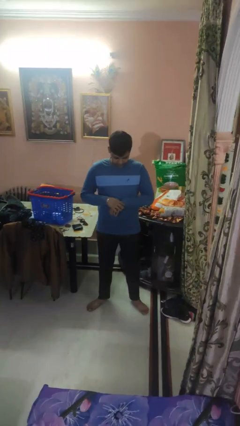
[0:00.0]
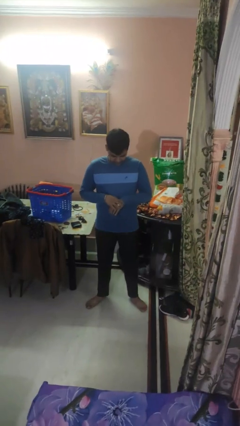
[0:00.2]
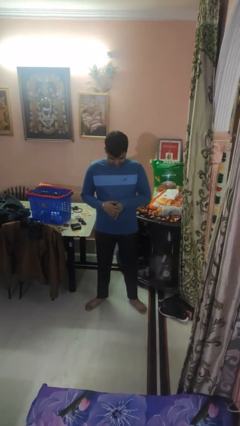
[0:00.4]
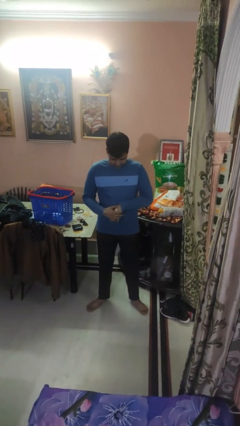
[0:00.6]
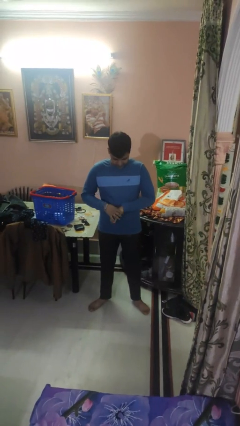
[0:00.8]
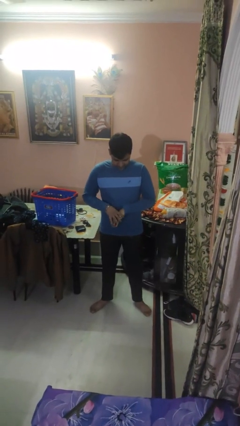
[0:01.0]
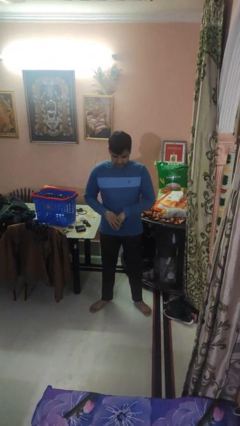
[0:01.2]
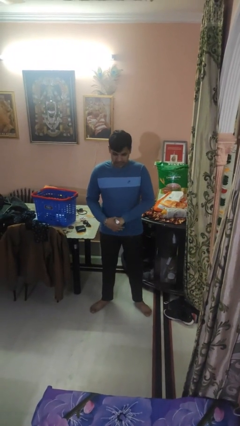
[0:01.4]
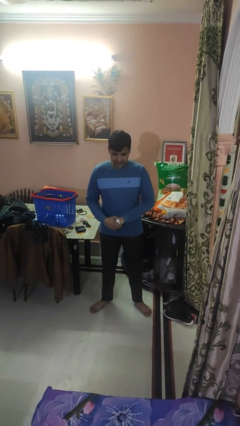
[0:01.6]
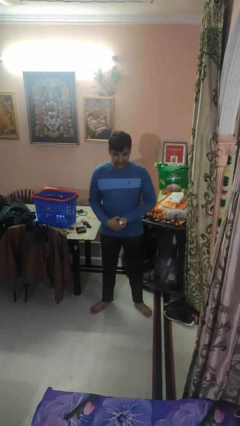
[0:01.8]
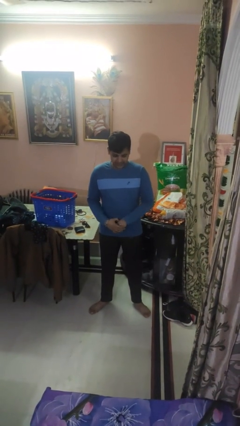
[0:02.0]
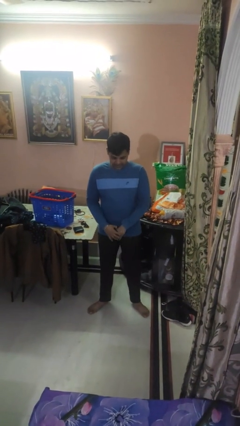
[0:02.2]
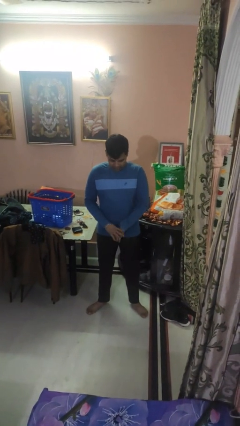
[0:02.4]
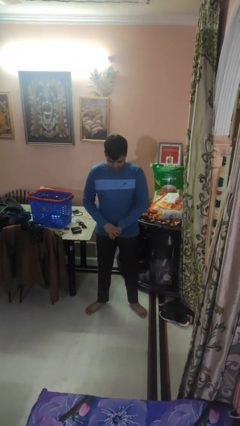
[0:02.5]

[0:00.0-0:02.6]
person takes off wristwatch

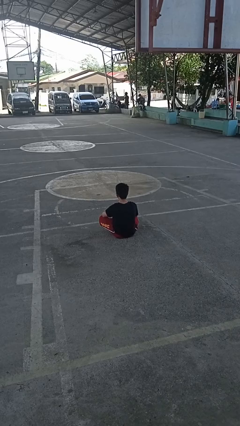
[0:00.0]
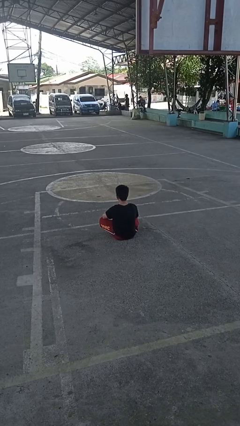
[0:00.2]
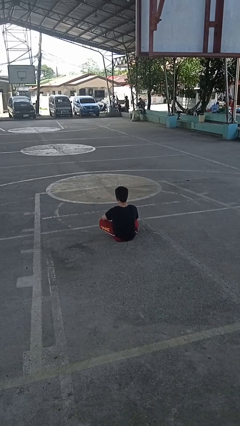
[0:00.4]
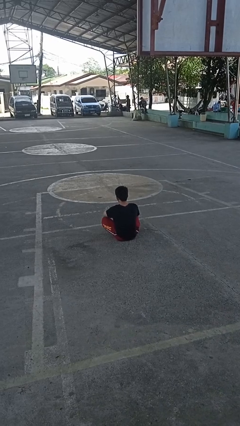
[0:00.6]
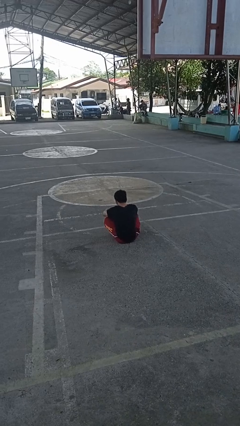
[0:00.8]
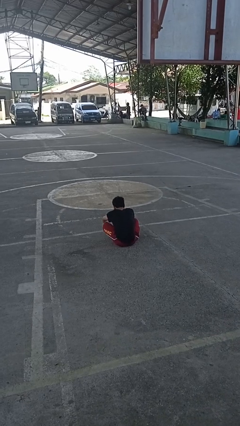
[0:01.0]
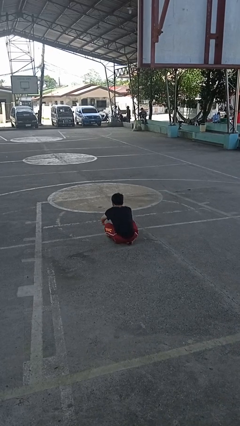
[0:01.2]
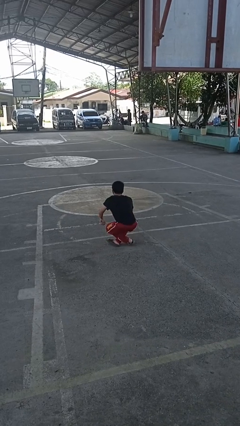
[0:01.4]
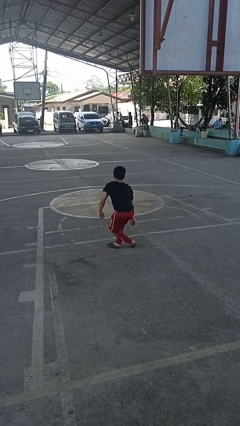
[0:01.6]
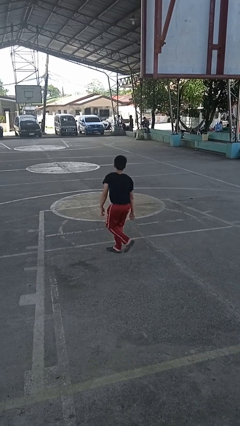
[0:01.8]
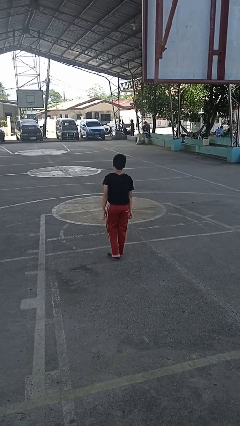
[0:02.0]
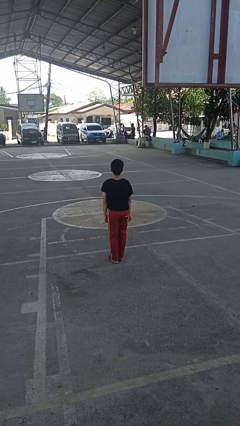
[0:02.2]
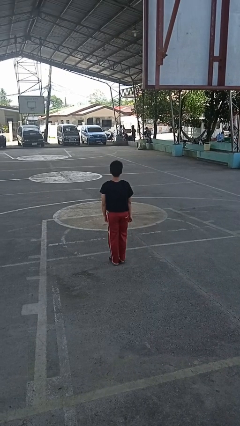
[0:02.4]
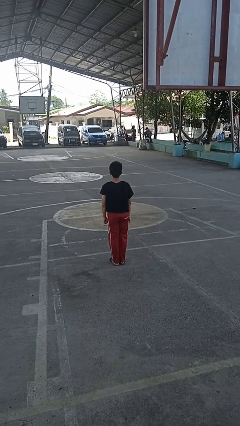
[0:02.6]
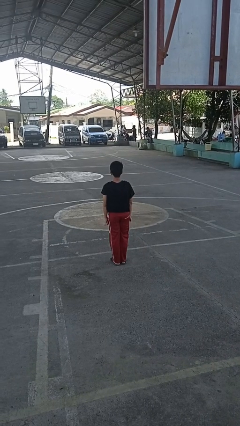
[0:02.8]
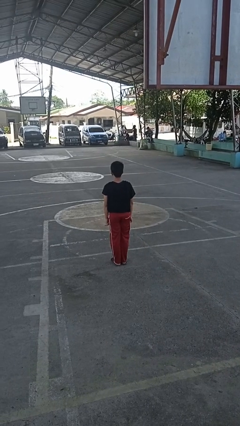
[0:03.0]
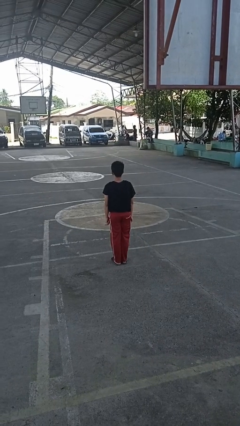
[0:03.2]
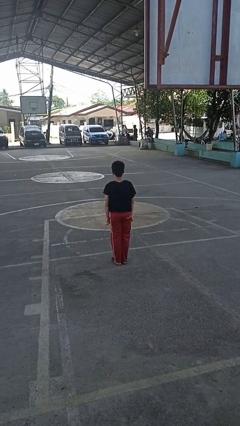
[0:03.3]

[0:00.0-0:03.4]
person stands up from floor

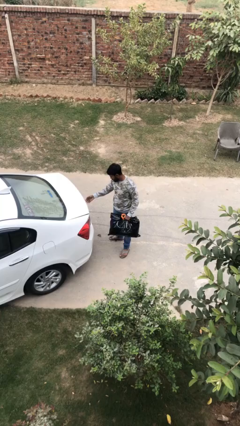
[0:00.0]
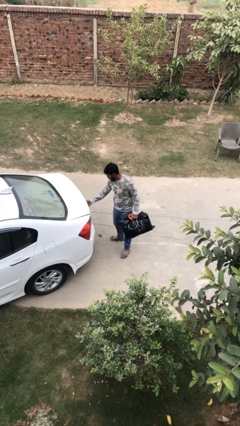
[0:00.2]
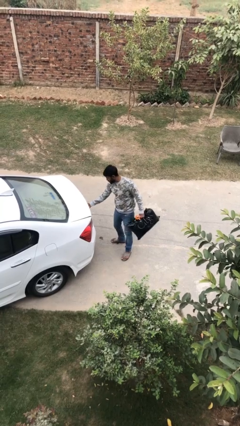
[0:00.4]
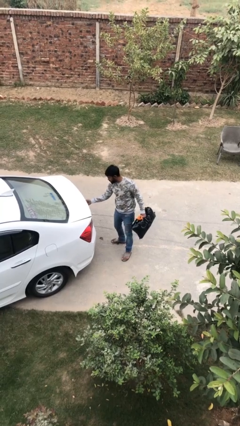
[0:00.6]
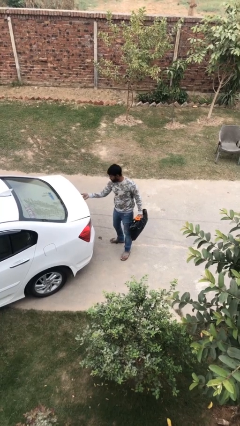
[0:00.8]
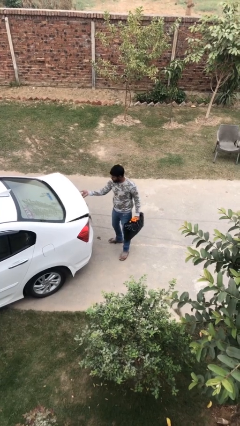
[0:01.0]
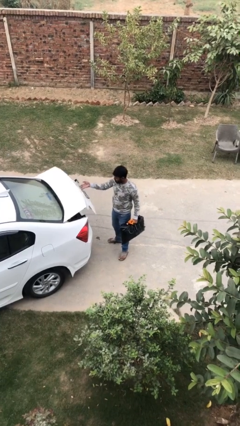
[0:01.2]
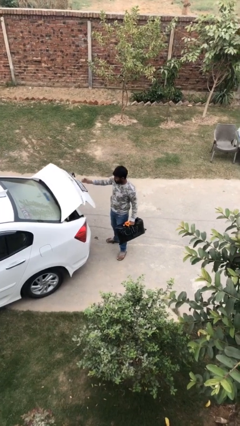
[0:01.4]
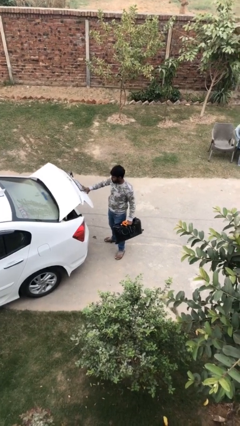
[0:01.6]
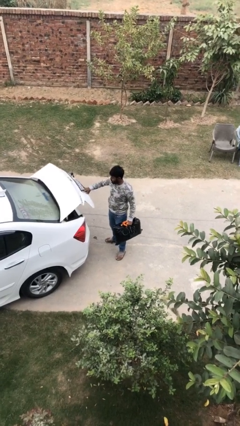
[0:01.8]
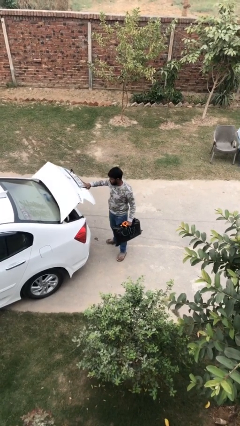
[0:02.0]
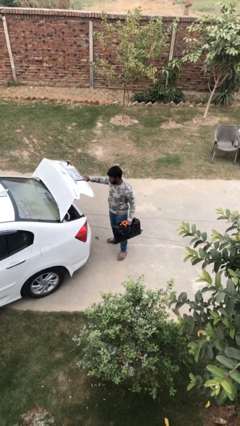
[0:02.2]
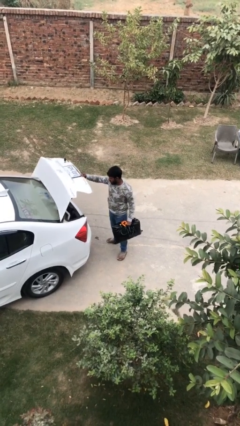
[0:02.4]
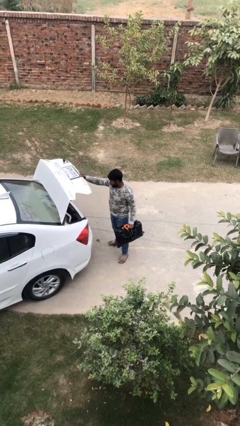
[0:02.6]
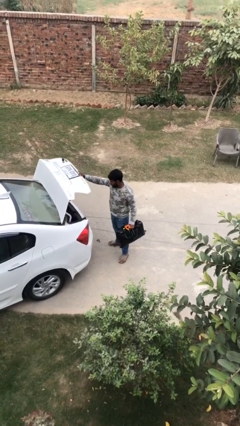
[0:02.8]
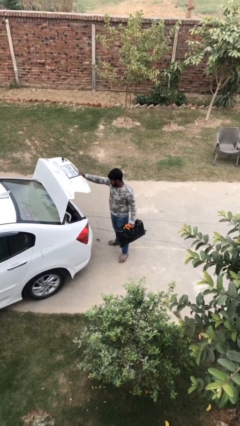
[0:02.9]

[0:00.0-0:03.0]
person opens car trunk

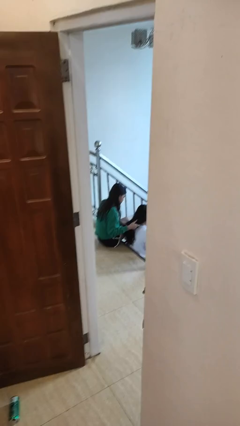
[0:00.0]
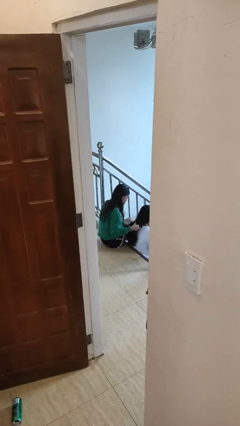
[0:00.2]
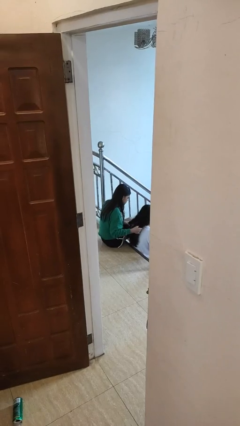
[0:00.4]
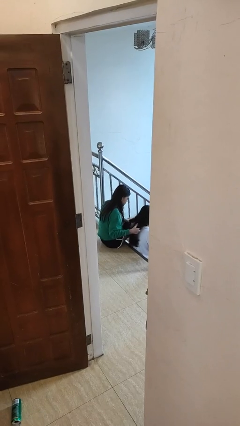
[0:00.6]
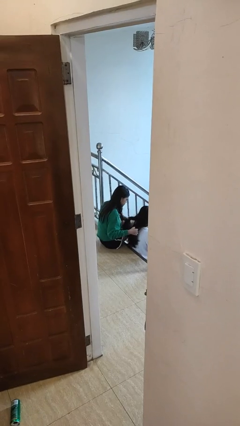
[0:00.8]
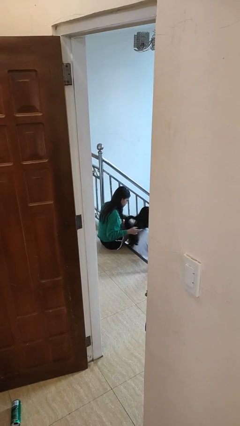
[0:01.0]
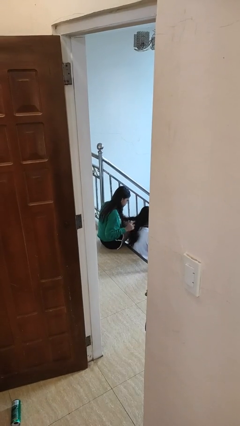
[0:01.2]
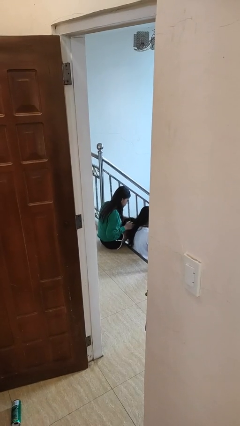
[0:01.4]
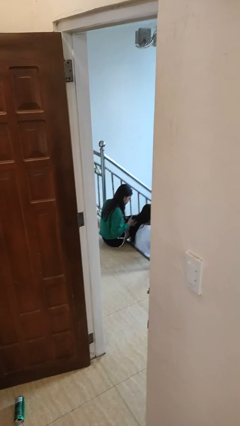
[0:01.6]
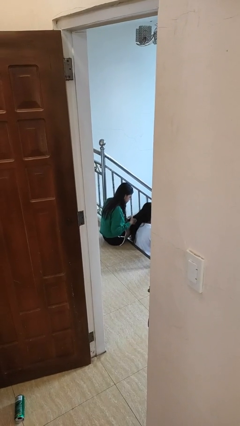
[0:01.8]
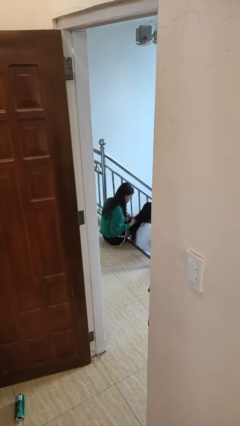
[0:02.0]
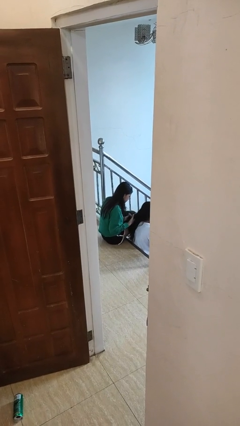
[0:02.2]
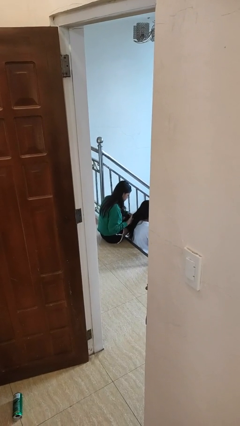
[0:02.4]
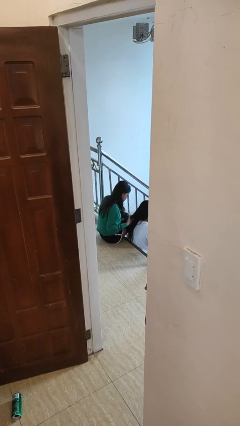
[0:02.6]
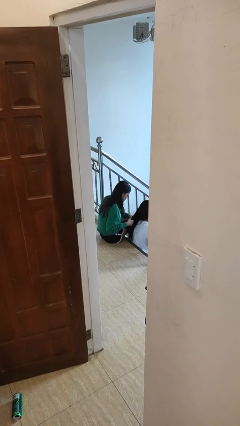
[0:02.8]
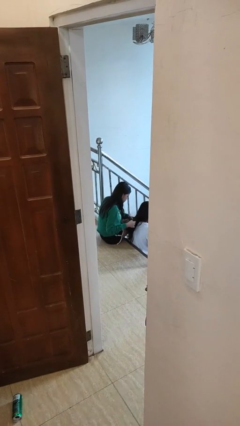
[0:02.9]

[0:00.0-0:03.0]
person braids hair of person

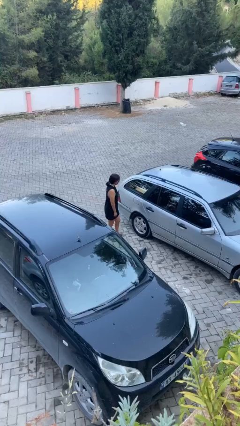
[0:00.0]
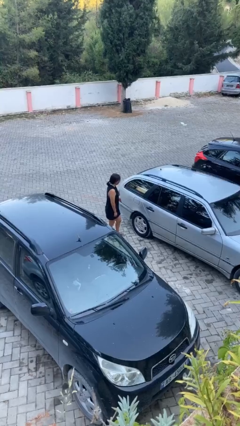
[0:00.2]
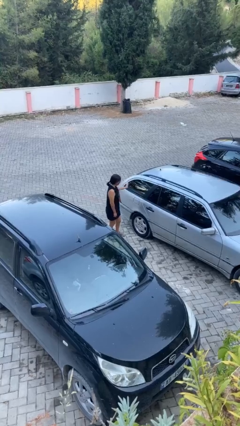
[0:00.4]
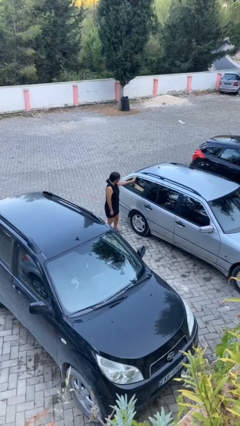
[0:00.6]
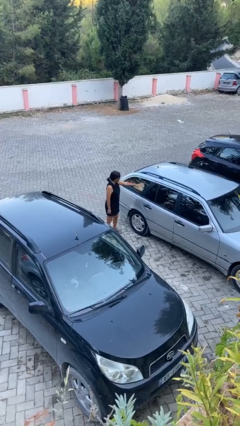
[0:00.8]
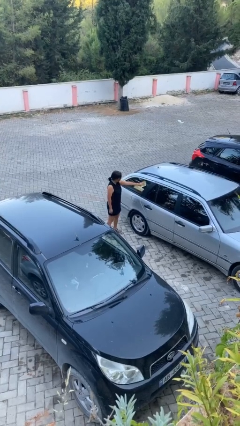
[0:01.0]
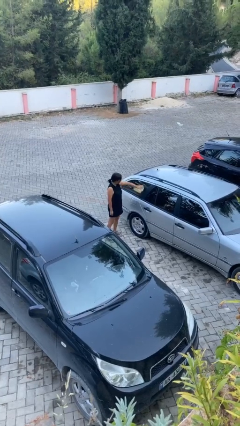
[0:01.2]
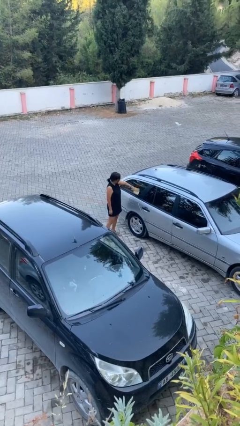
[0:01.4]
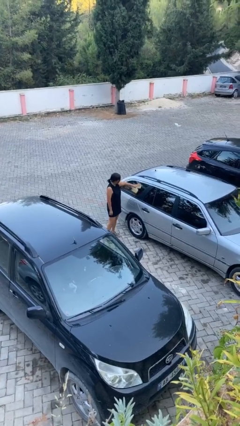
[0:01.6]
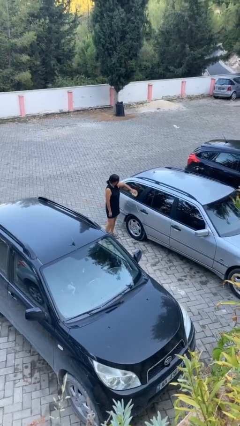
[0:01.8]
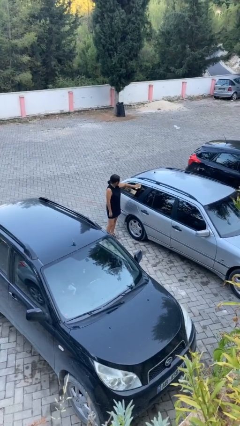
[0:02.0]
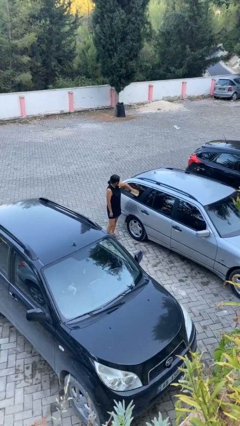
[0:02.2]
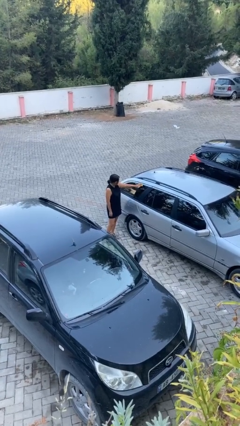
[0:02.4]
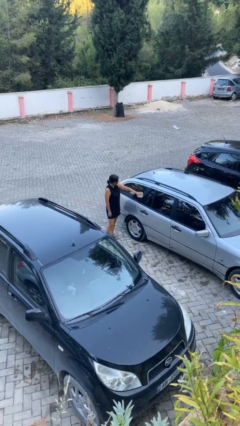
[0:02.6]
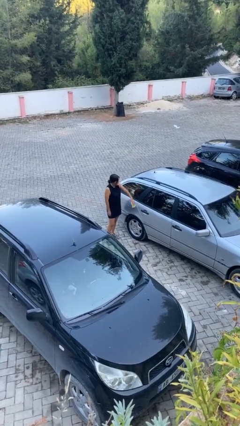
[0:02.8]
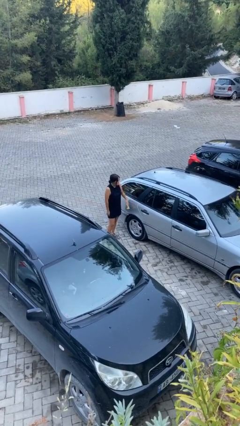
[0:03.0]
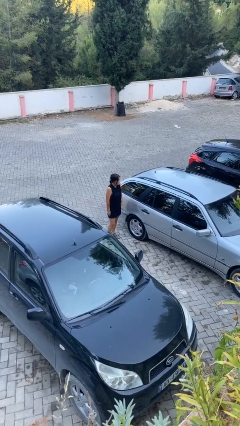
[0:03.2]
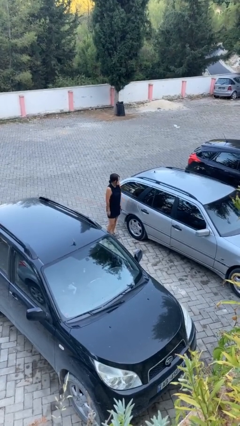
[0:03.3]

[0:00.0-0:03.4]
person polishes car with rag

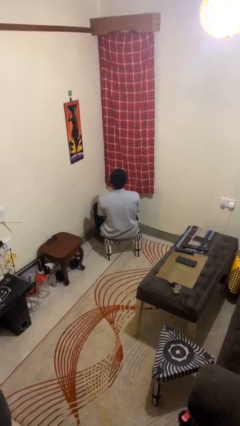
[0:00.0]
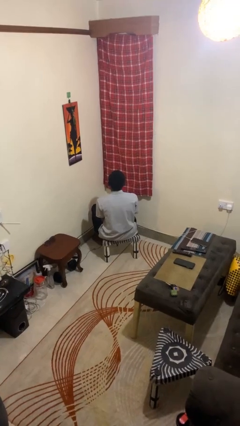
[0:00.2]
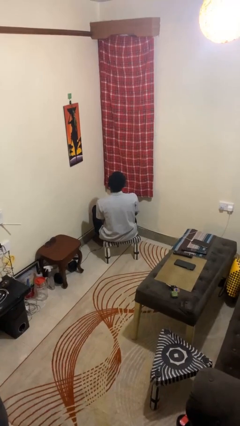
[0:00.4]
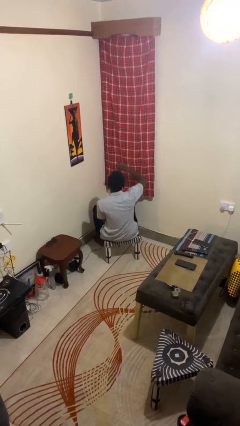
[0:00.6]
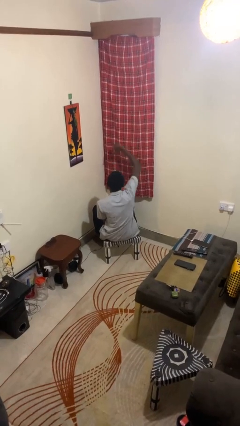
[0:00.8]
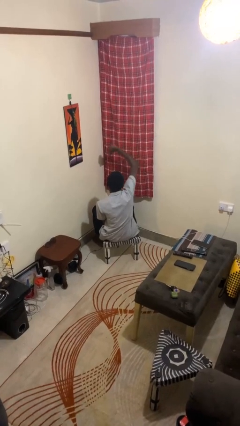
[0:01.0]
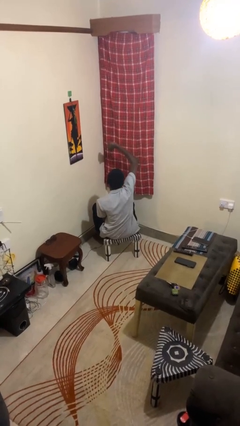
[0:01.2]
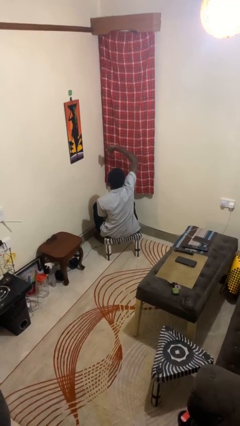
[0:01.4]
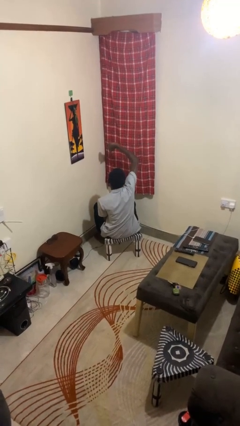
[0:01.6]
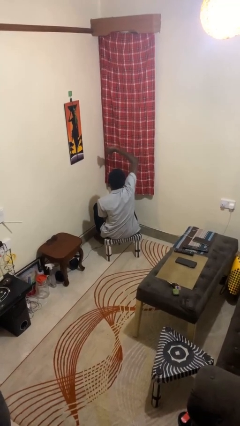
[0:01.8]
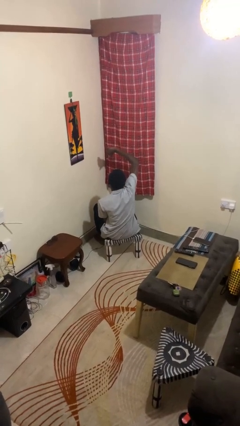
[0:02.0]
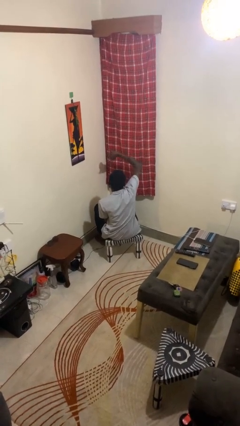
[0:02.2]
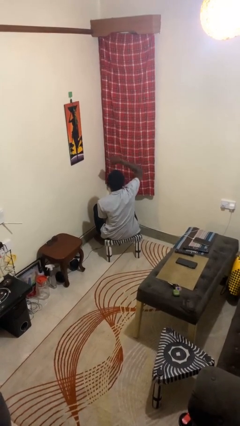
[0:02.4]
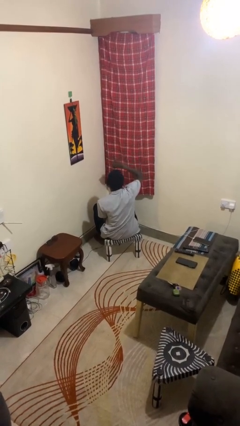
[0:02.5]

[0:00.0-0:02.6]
person gestures thumbs down
